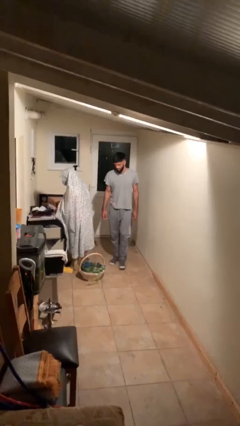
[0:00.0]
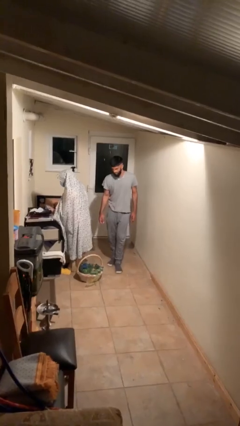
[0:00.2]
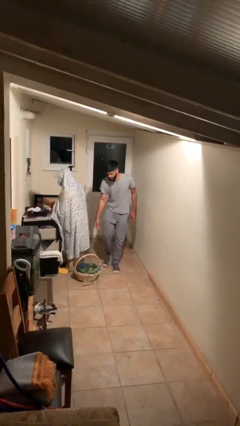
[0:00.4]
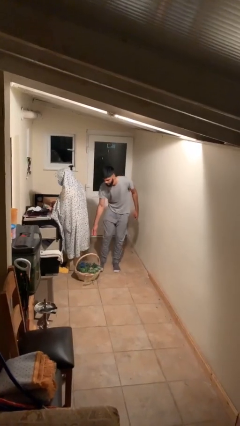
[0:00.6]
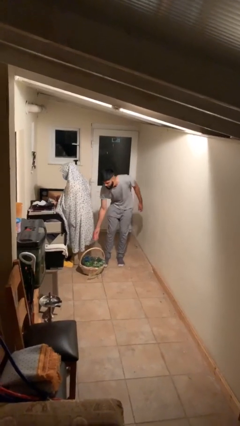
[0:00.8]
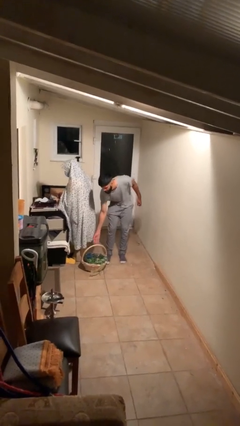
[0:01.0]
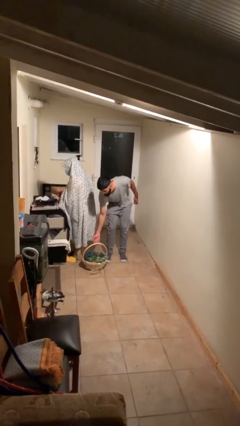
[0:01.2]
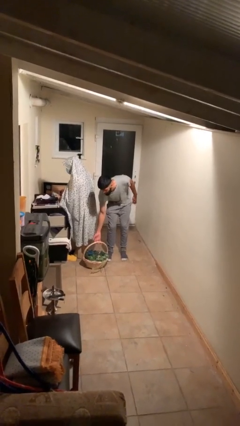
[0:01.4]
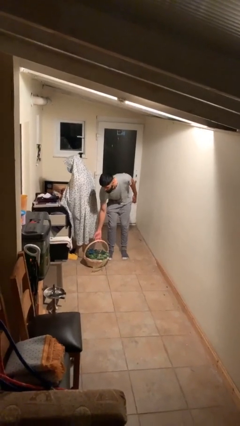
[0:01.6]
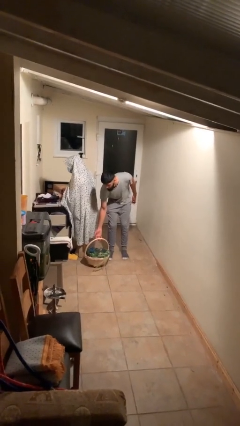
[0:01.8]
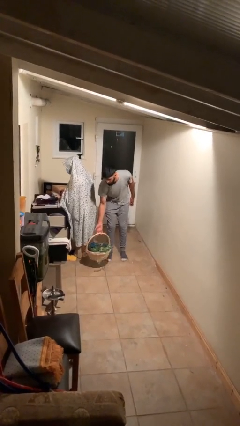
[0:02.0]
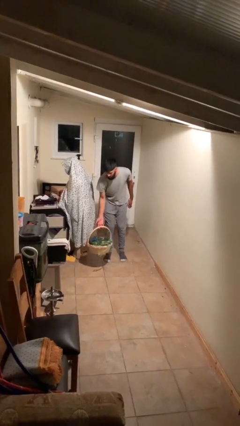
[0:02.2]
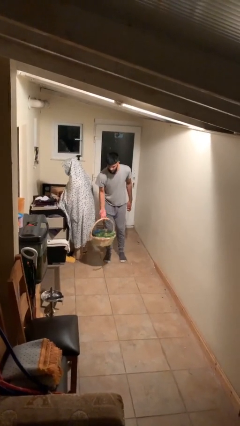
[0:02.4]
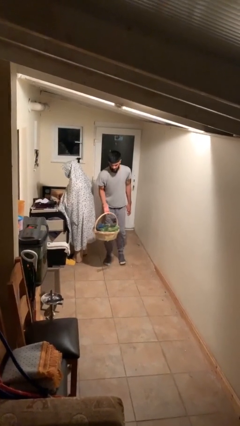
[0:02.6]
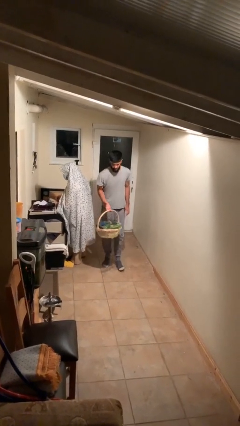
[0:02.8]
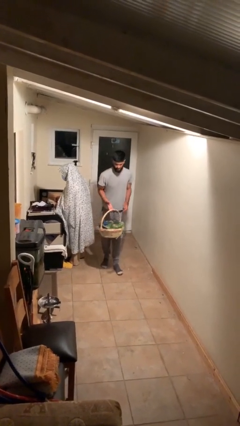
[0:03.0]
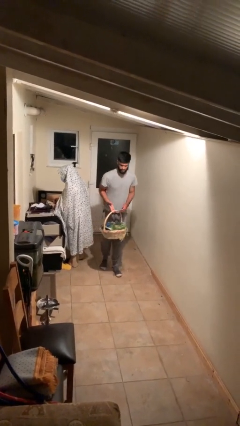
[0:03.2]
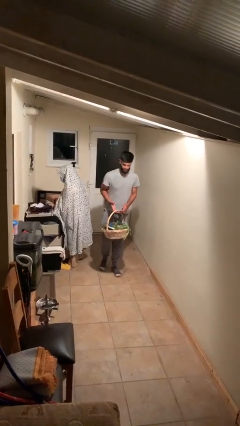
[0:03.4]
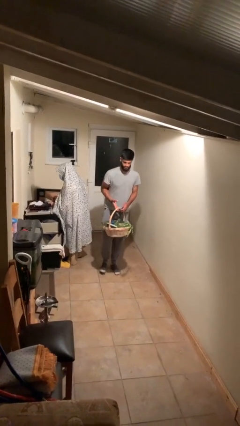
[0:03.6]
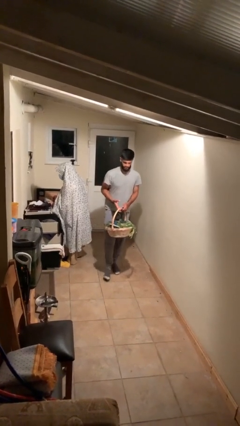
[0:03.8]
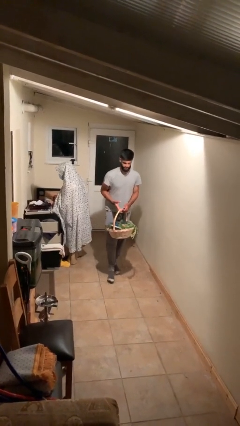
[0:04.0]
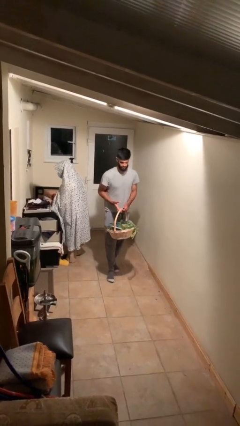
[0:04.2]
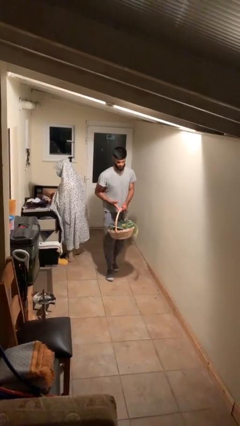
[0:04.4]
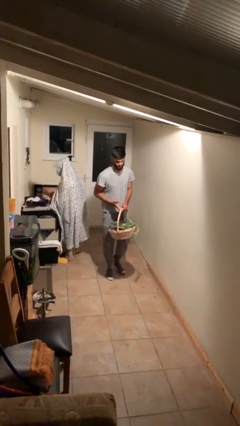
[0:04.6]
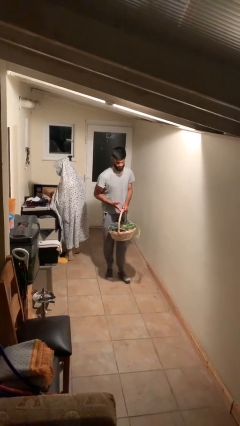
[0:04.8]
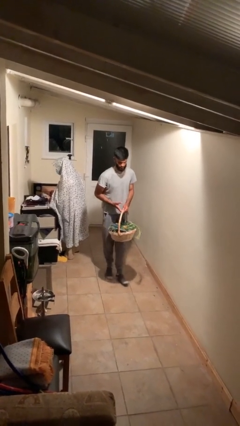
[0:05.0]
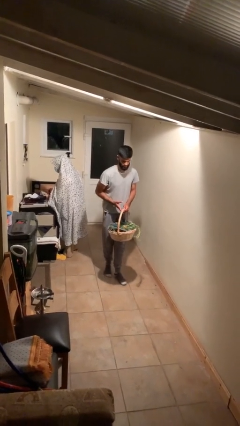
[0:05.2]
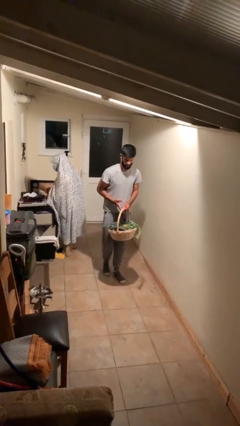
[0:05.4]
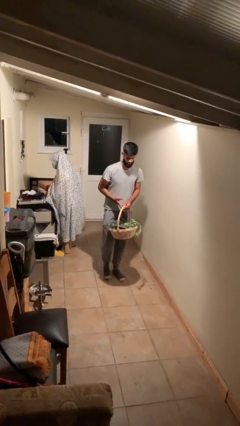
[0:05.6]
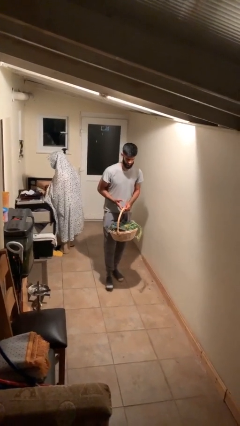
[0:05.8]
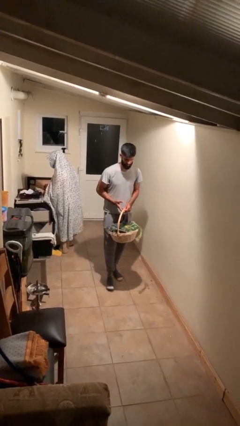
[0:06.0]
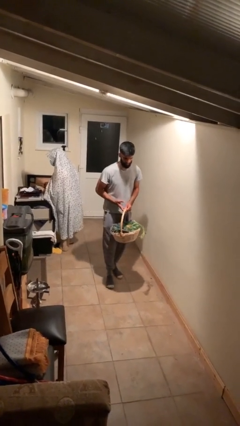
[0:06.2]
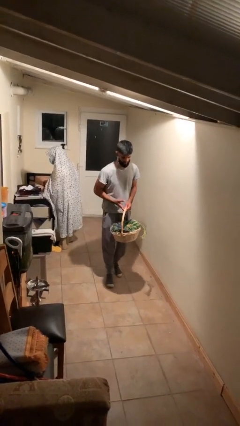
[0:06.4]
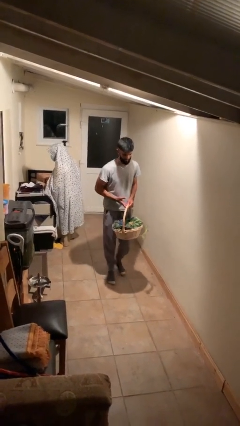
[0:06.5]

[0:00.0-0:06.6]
person steals object from person

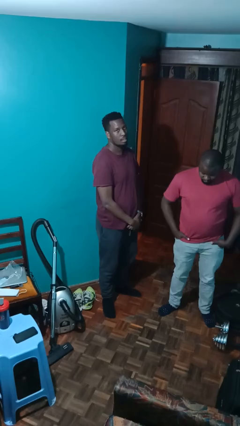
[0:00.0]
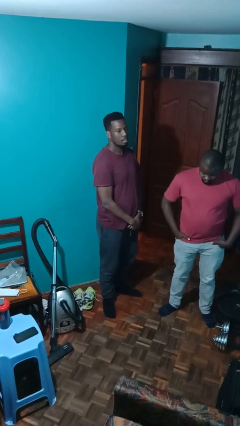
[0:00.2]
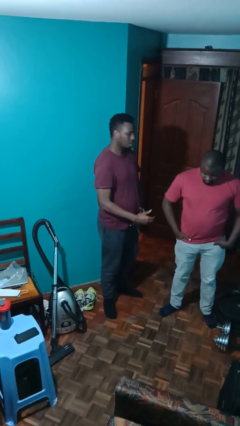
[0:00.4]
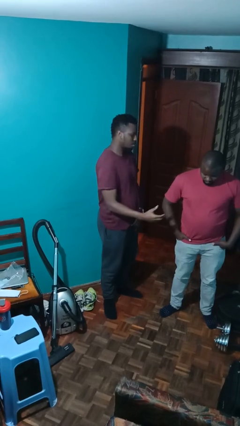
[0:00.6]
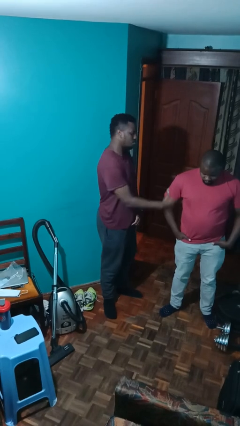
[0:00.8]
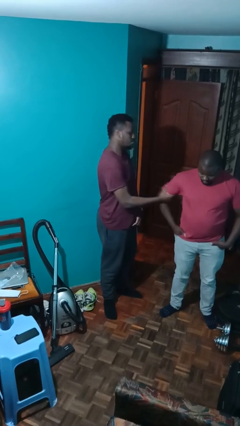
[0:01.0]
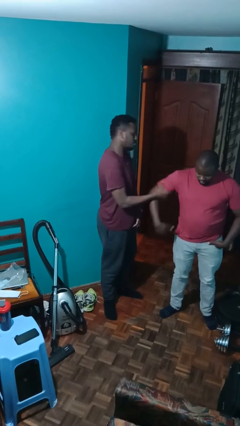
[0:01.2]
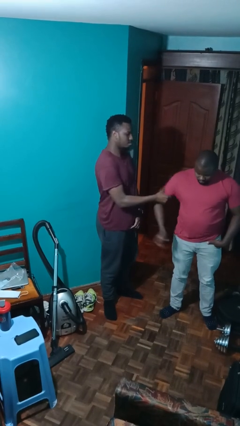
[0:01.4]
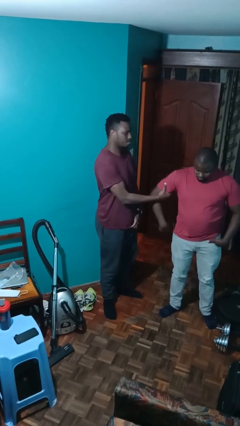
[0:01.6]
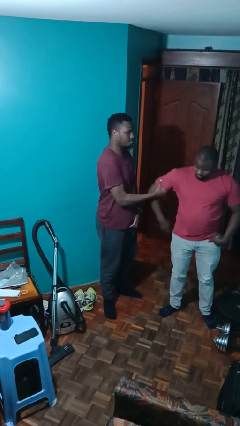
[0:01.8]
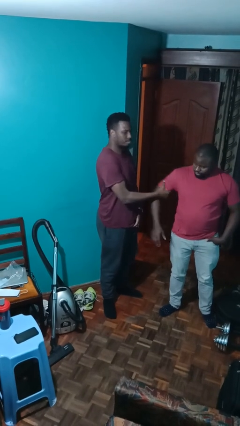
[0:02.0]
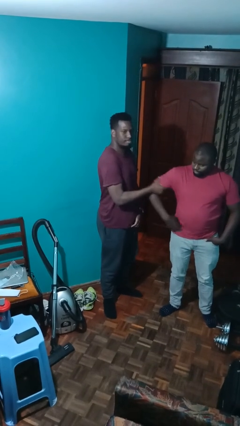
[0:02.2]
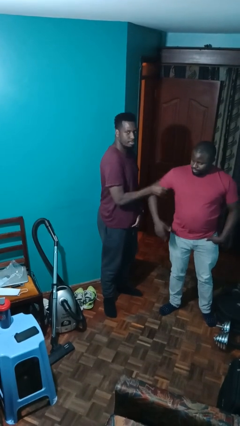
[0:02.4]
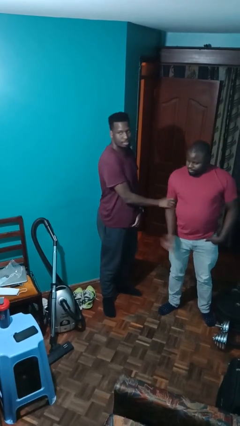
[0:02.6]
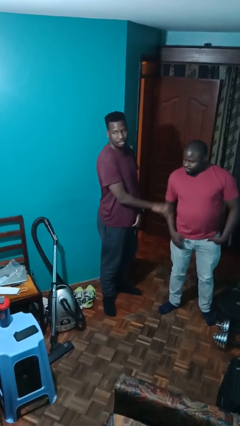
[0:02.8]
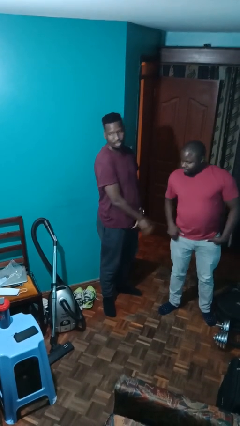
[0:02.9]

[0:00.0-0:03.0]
person grabs person by bicep

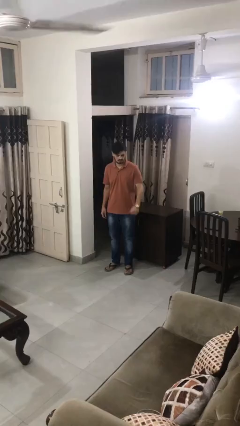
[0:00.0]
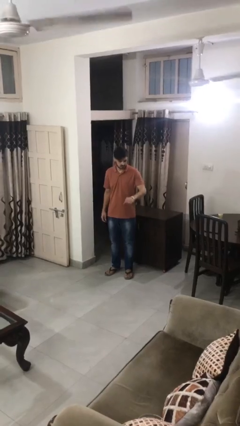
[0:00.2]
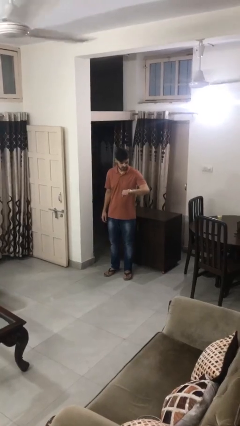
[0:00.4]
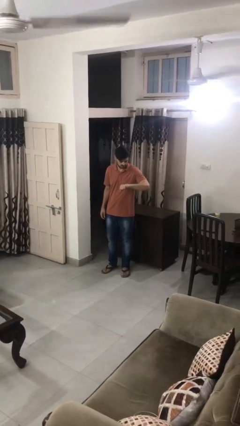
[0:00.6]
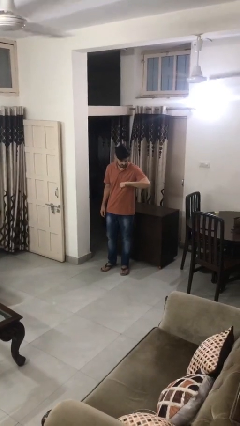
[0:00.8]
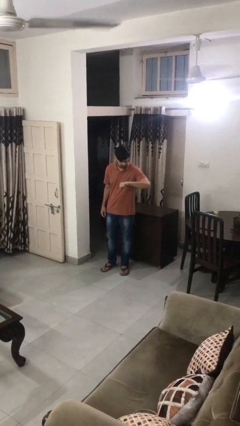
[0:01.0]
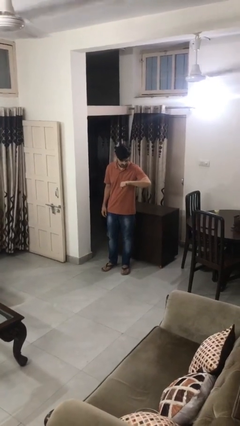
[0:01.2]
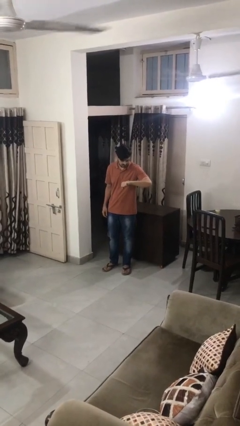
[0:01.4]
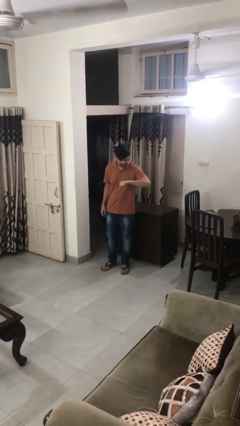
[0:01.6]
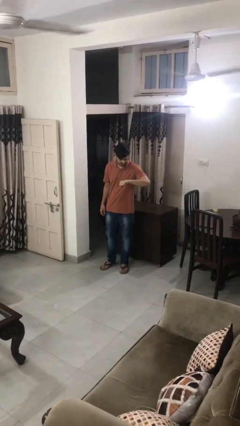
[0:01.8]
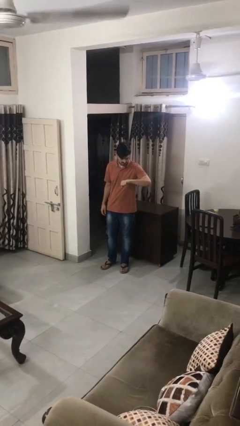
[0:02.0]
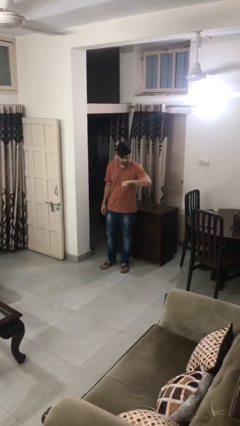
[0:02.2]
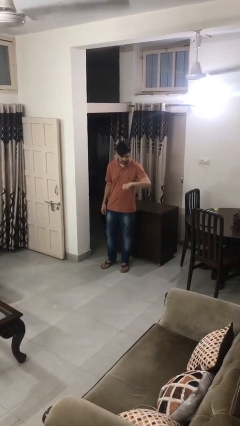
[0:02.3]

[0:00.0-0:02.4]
person looks at wristwatch

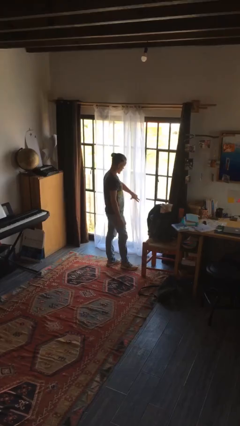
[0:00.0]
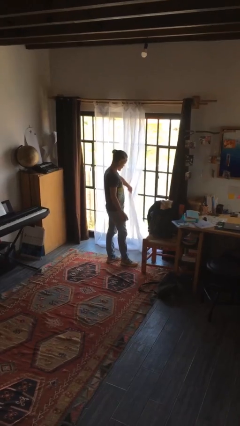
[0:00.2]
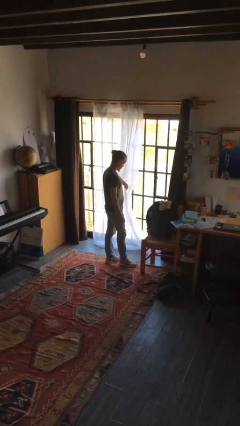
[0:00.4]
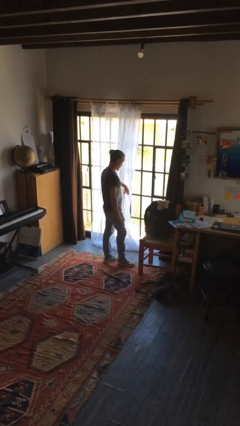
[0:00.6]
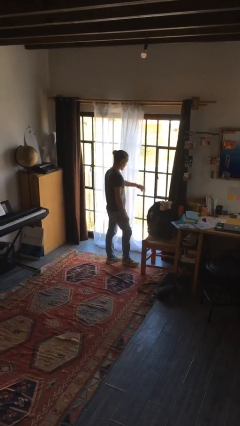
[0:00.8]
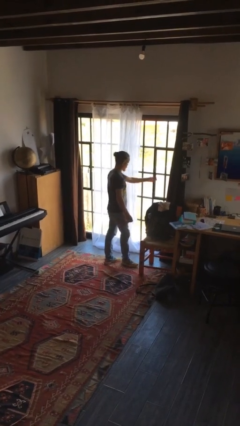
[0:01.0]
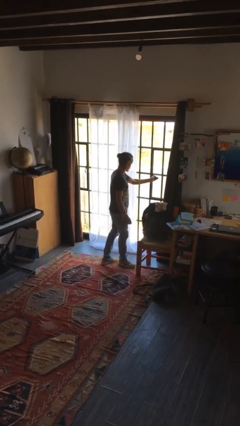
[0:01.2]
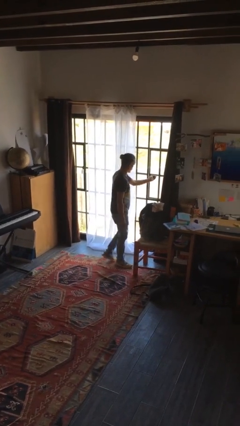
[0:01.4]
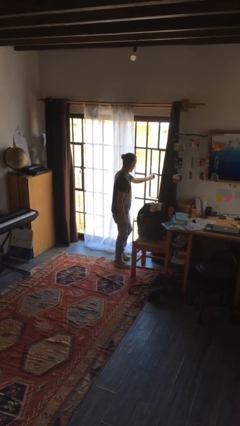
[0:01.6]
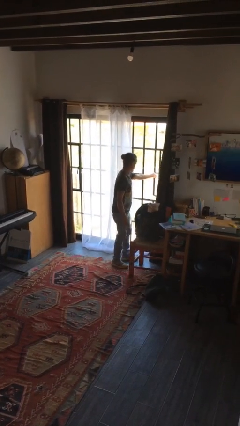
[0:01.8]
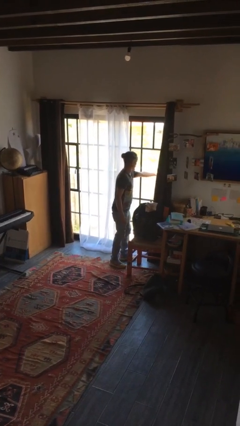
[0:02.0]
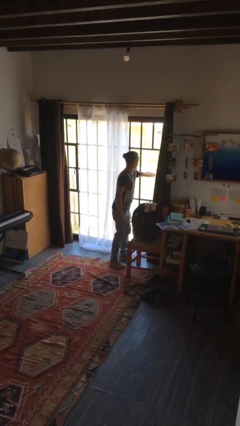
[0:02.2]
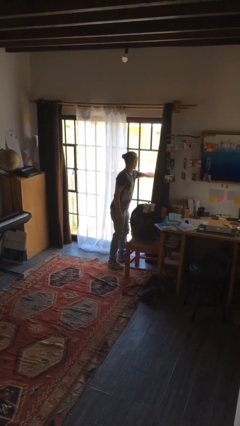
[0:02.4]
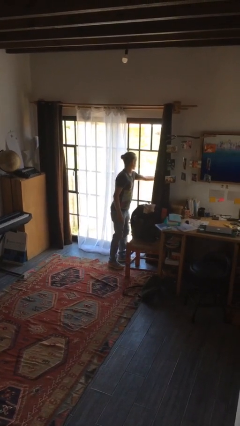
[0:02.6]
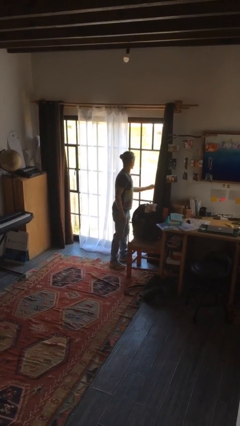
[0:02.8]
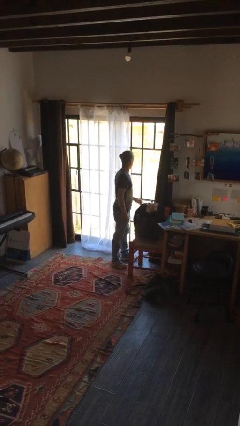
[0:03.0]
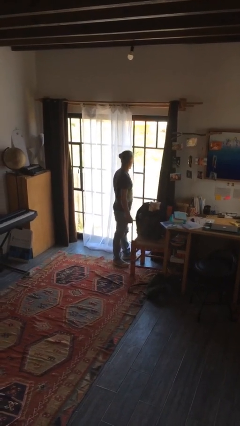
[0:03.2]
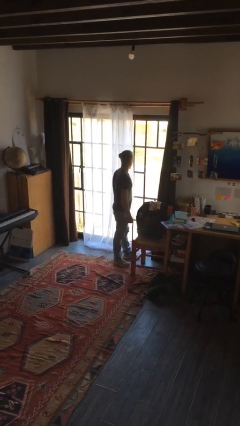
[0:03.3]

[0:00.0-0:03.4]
person opens home window

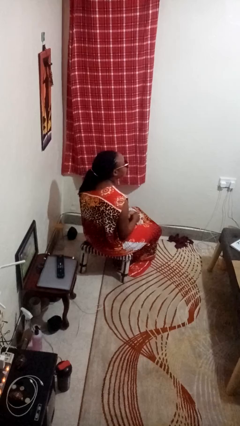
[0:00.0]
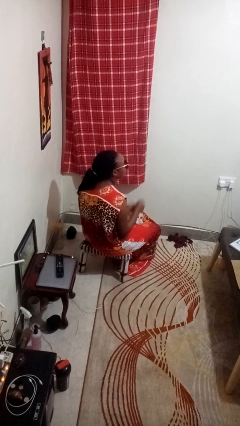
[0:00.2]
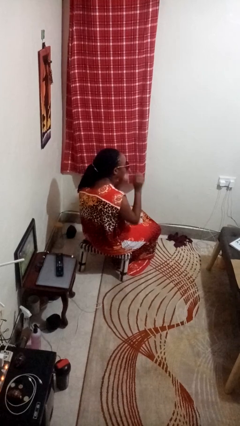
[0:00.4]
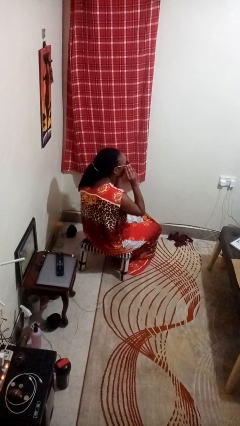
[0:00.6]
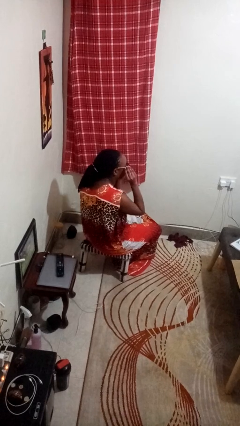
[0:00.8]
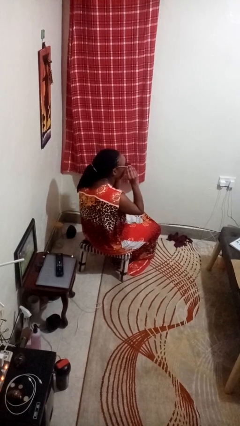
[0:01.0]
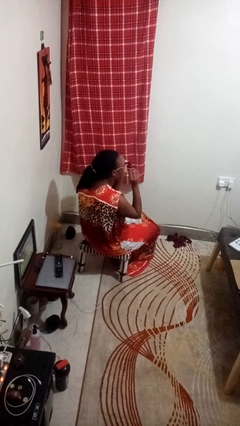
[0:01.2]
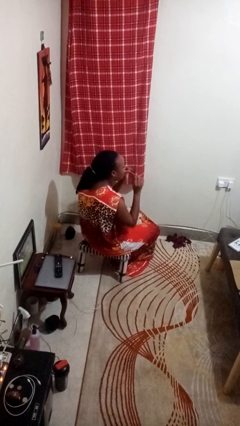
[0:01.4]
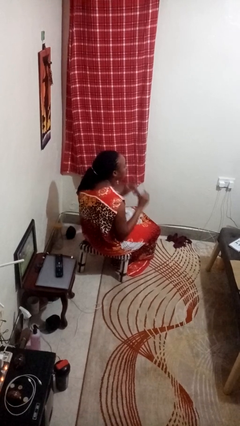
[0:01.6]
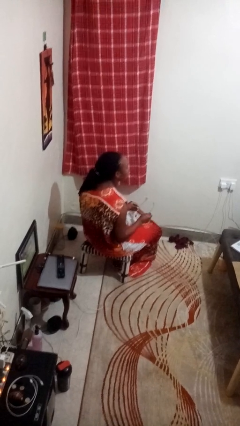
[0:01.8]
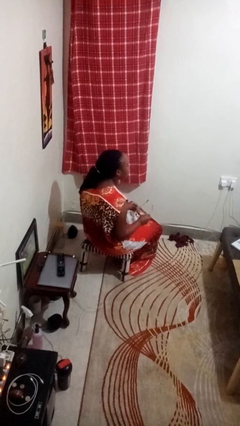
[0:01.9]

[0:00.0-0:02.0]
person takes off sunglasses
